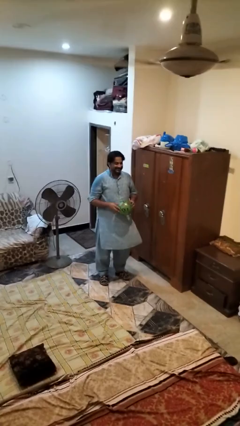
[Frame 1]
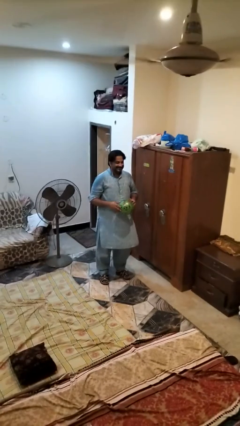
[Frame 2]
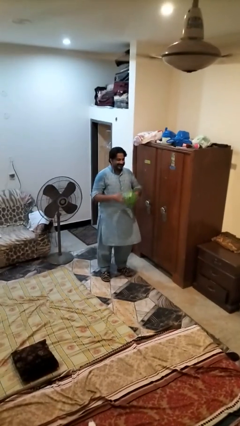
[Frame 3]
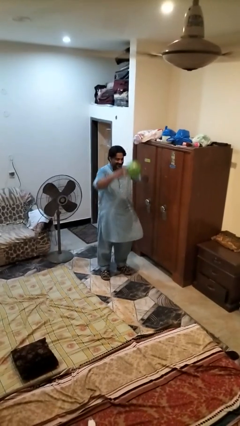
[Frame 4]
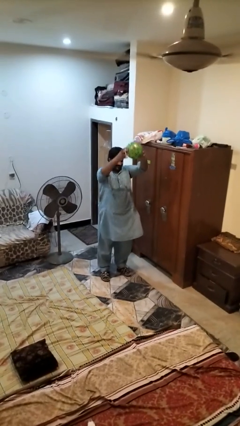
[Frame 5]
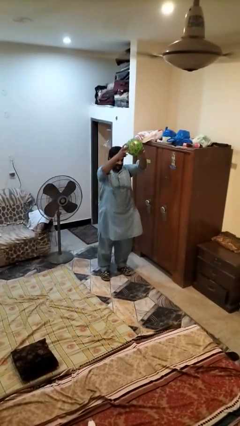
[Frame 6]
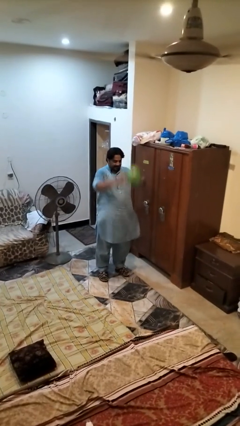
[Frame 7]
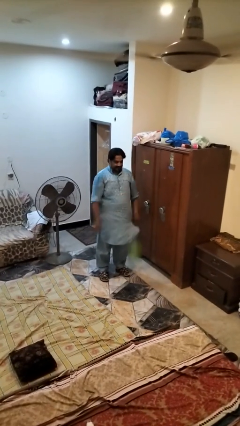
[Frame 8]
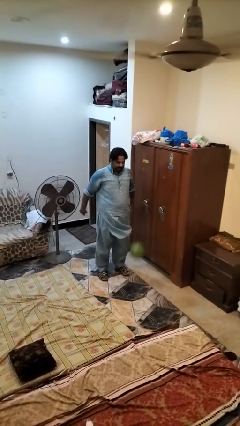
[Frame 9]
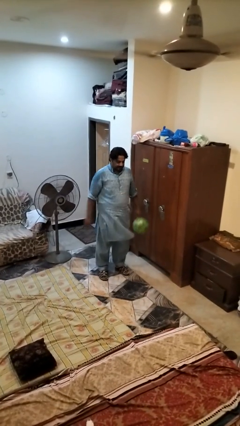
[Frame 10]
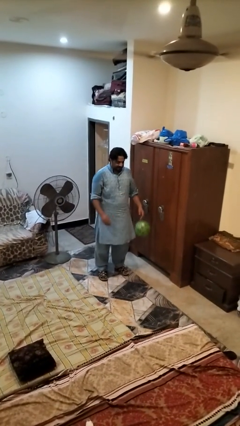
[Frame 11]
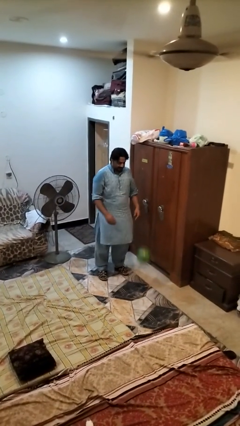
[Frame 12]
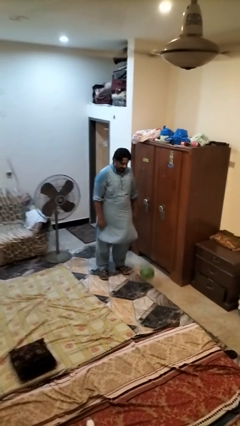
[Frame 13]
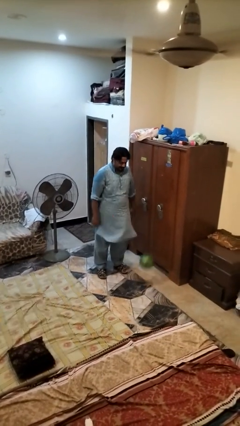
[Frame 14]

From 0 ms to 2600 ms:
person drops object

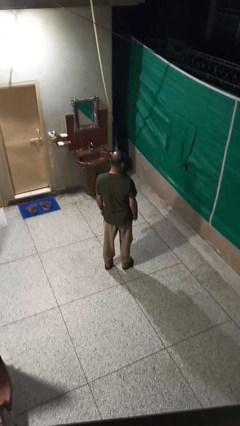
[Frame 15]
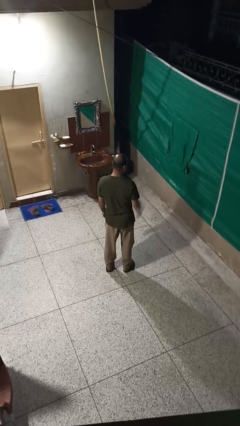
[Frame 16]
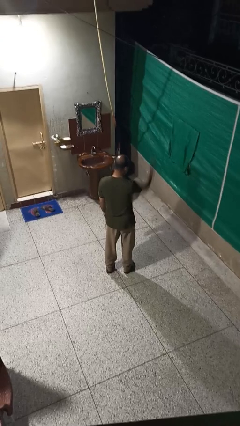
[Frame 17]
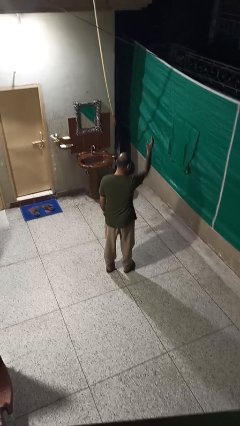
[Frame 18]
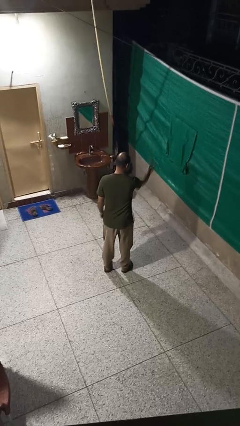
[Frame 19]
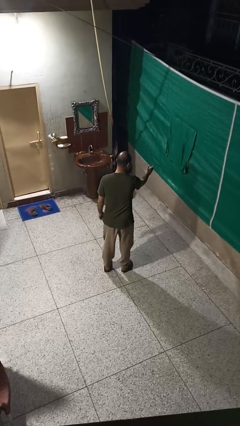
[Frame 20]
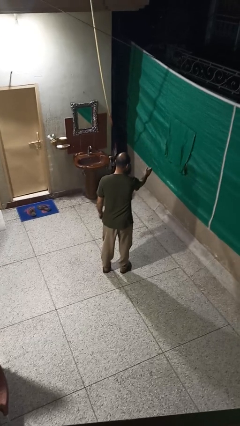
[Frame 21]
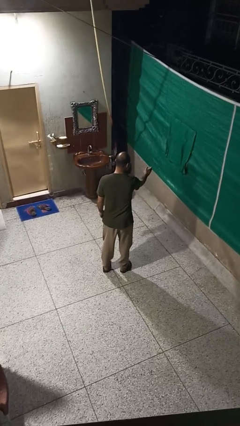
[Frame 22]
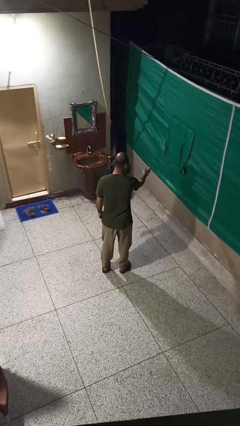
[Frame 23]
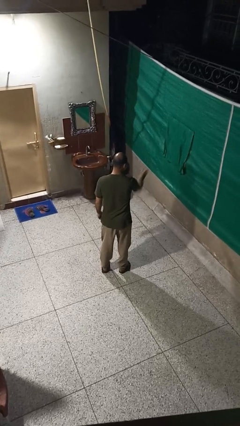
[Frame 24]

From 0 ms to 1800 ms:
person karate chop

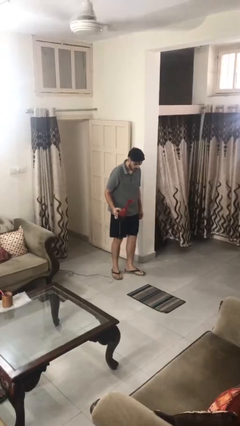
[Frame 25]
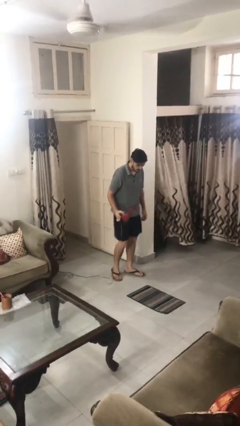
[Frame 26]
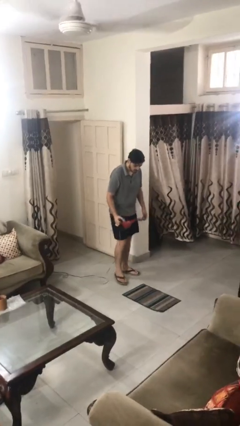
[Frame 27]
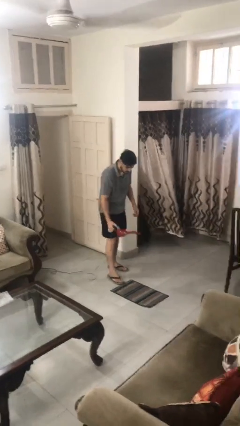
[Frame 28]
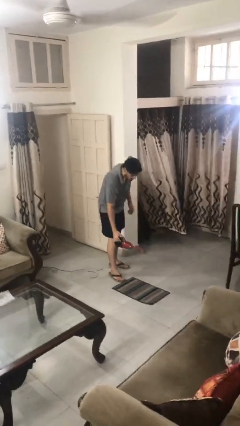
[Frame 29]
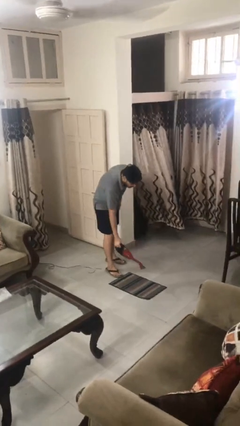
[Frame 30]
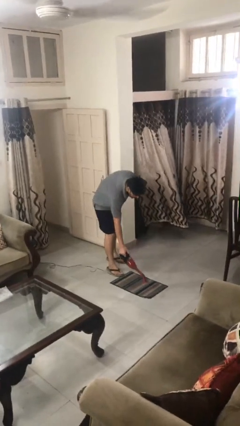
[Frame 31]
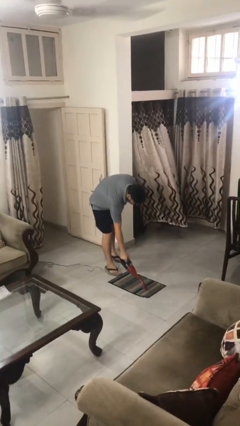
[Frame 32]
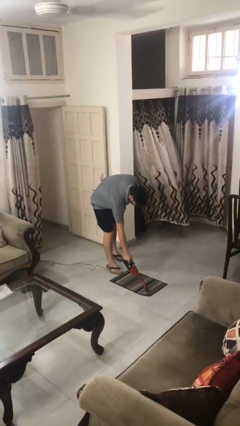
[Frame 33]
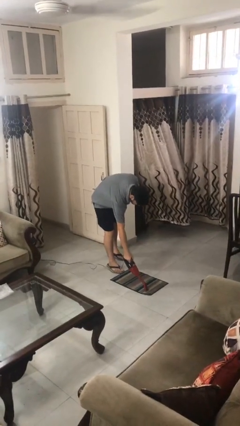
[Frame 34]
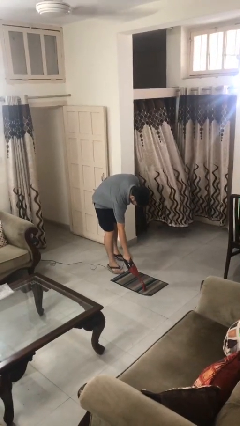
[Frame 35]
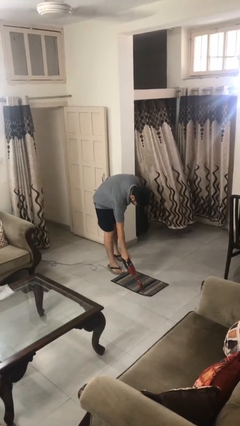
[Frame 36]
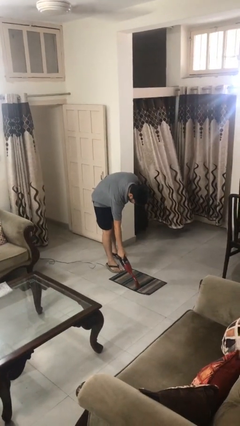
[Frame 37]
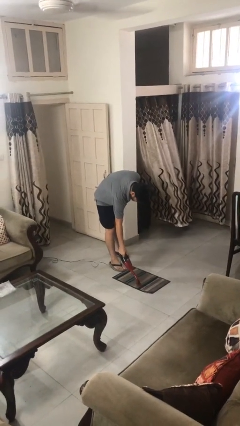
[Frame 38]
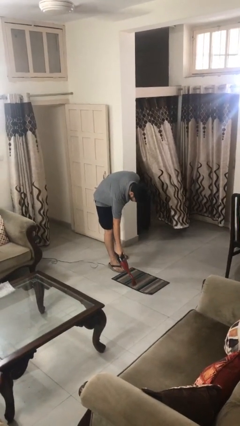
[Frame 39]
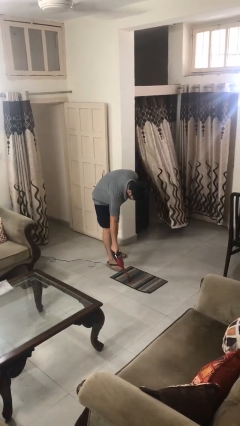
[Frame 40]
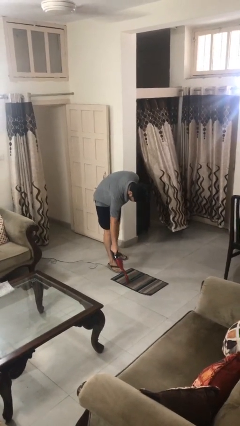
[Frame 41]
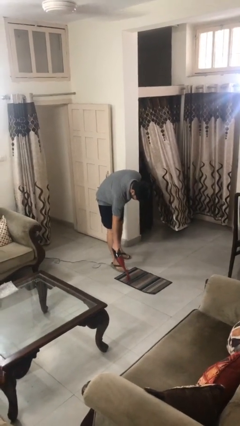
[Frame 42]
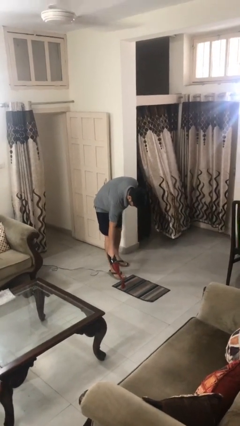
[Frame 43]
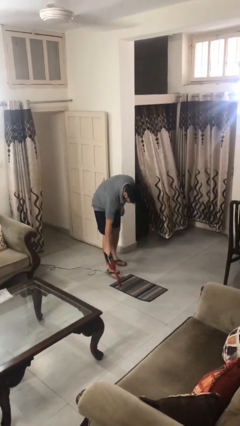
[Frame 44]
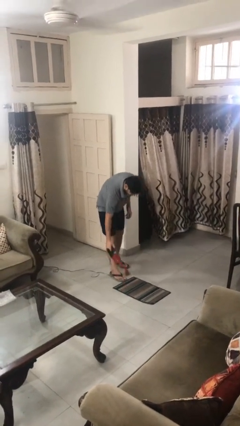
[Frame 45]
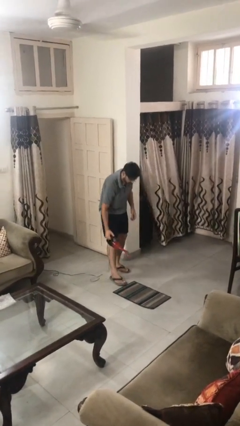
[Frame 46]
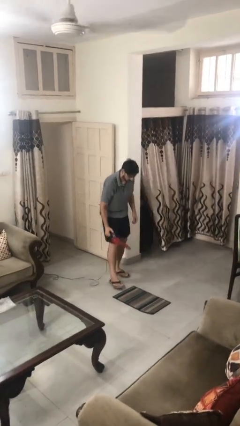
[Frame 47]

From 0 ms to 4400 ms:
person vacuums carpet

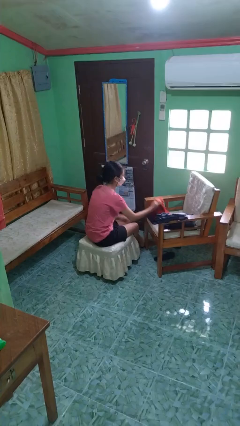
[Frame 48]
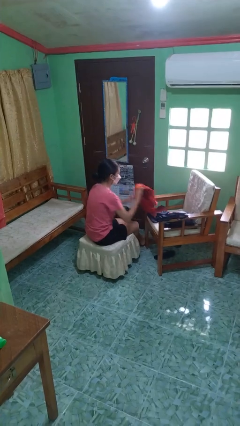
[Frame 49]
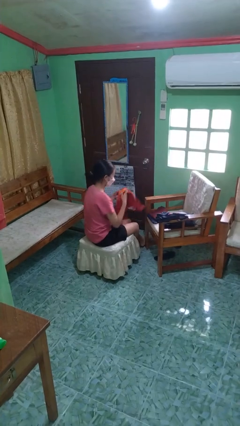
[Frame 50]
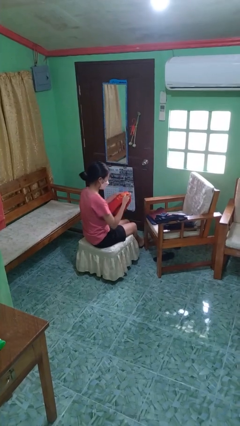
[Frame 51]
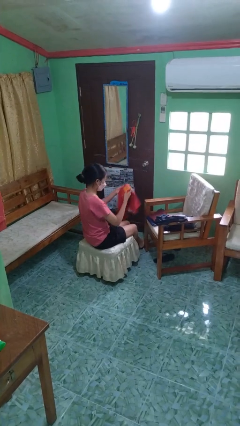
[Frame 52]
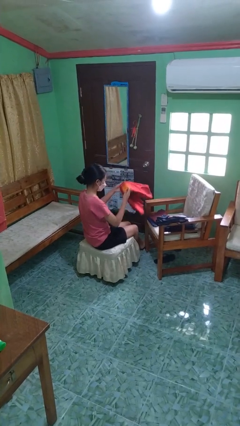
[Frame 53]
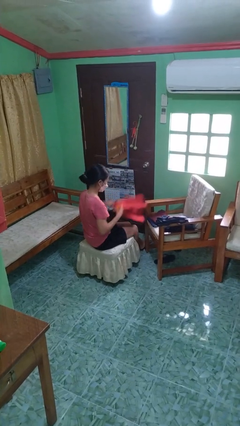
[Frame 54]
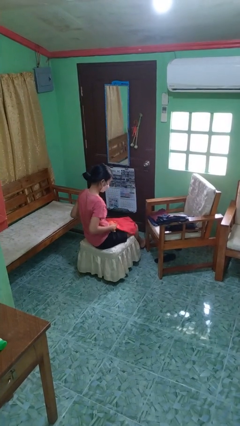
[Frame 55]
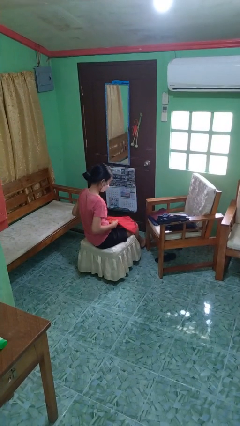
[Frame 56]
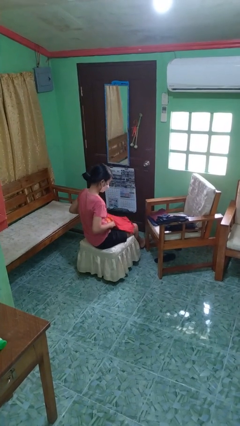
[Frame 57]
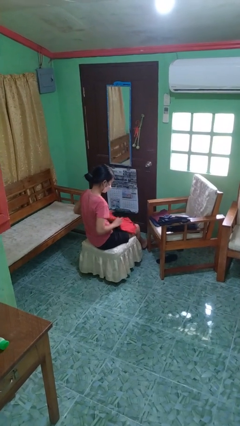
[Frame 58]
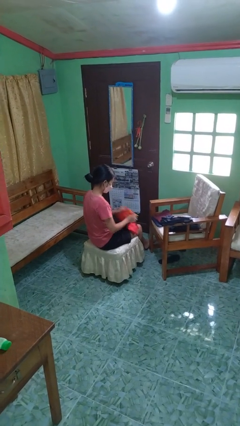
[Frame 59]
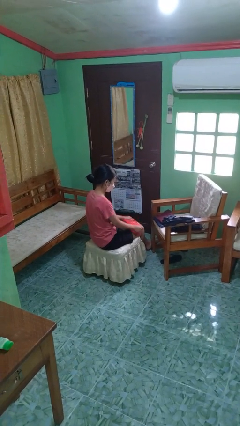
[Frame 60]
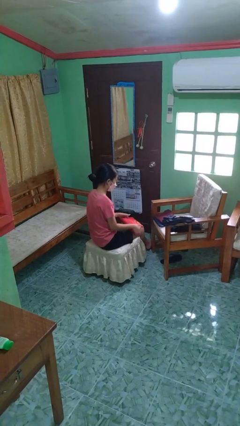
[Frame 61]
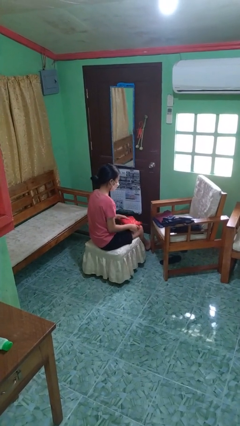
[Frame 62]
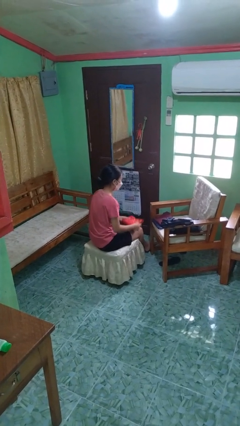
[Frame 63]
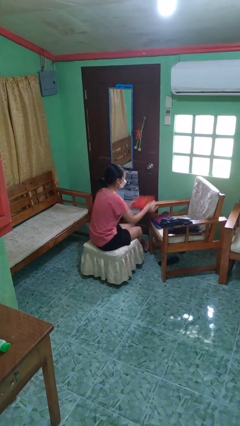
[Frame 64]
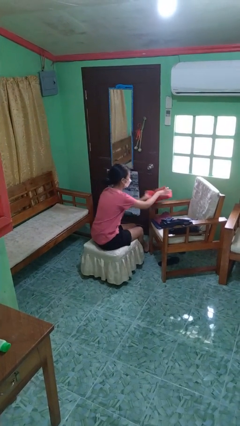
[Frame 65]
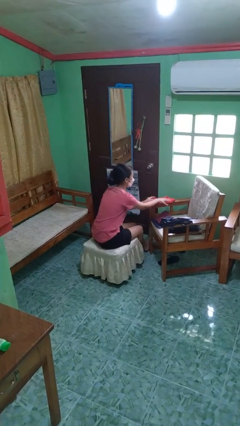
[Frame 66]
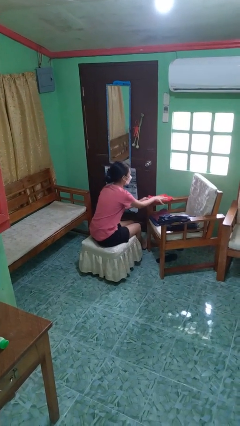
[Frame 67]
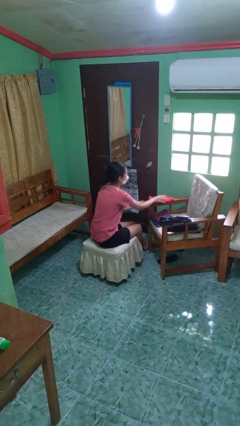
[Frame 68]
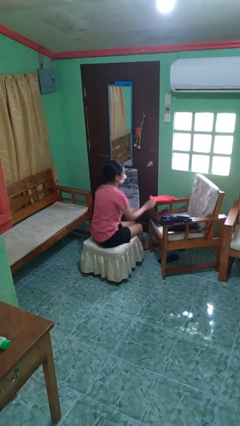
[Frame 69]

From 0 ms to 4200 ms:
person folds shirt

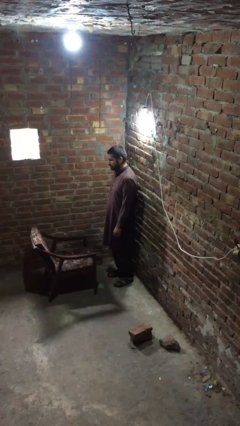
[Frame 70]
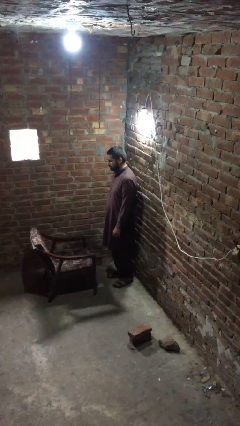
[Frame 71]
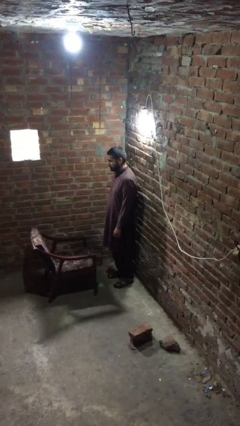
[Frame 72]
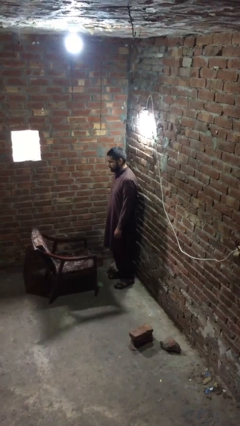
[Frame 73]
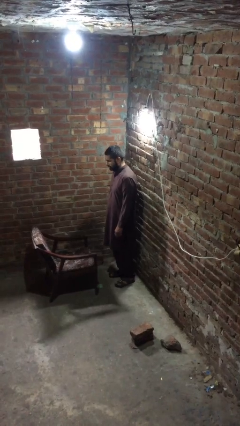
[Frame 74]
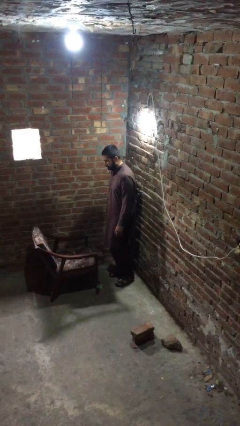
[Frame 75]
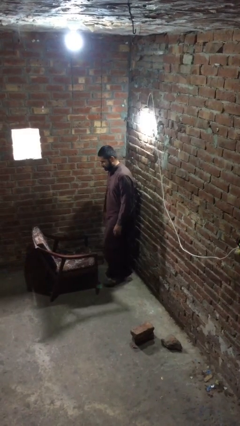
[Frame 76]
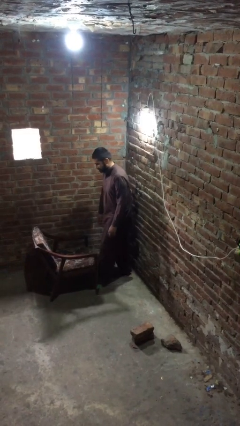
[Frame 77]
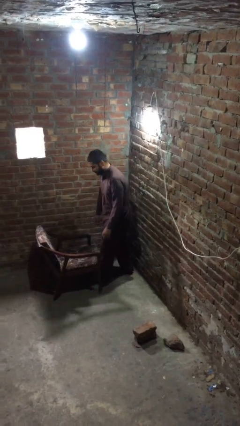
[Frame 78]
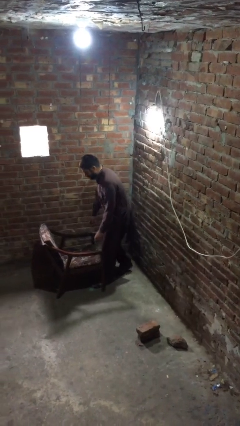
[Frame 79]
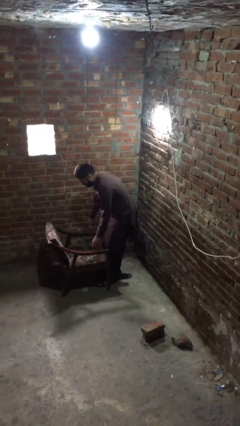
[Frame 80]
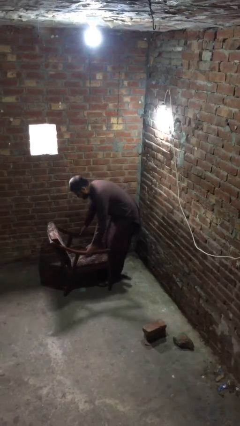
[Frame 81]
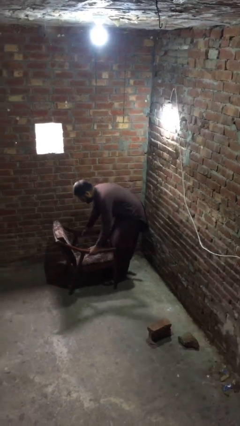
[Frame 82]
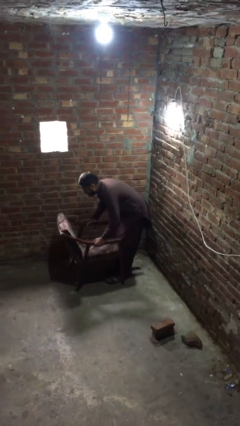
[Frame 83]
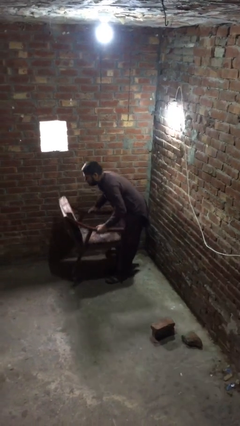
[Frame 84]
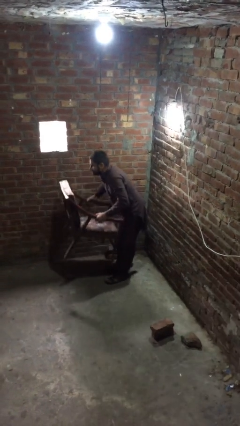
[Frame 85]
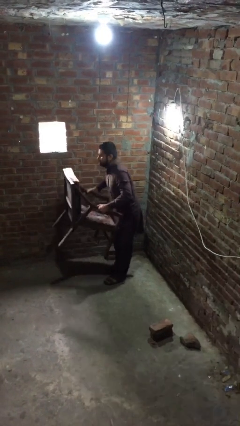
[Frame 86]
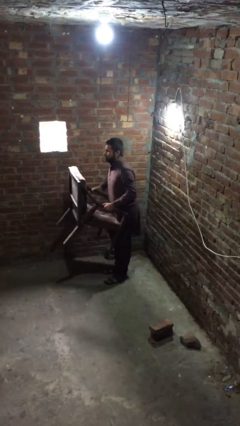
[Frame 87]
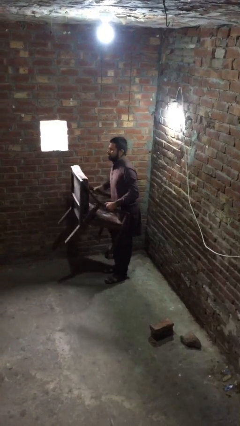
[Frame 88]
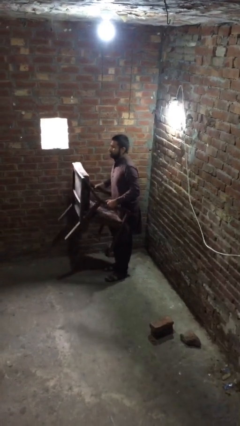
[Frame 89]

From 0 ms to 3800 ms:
person picks up object from floor

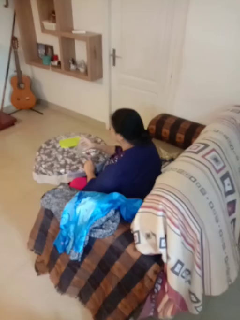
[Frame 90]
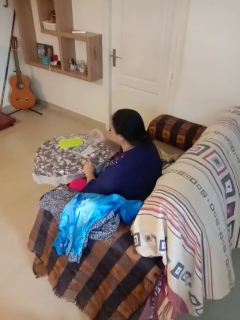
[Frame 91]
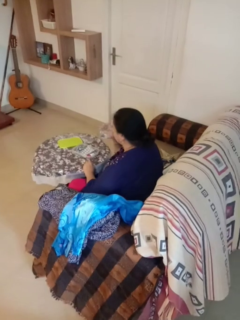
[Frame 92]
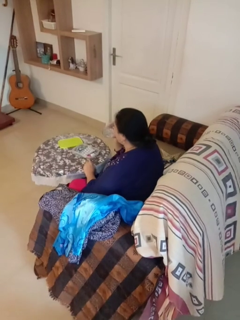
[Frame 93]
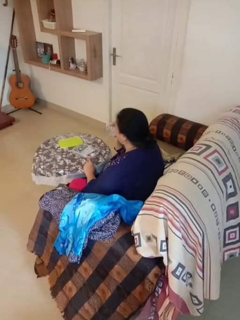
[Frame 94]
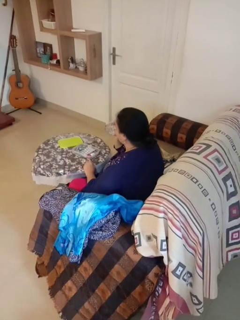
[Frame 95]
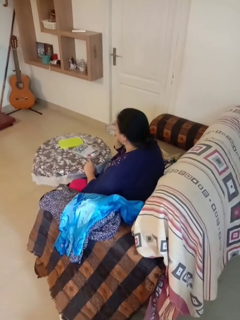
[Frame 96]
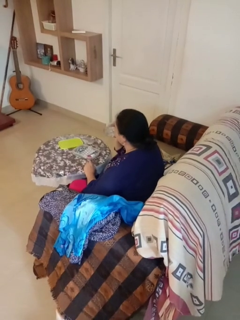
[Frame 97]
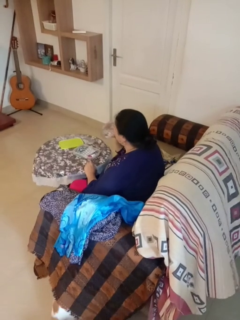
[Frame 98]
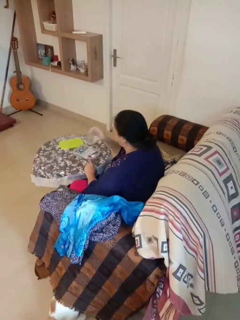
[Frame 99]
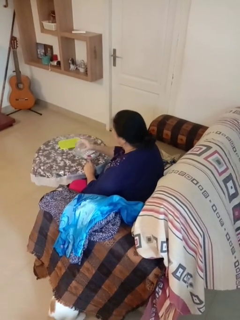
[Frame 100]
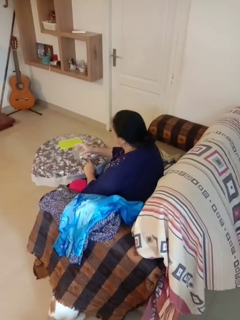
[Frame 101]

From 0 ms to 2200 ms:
person drinks from cup
